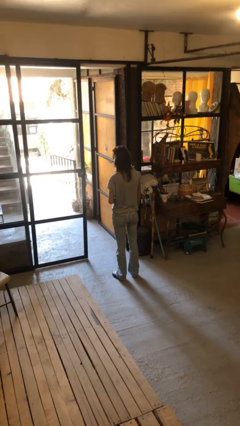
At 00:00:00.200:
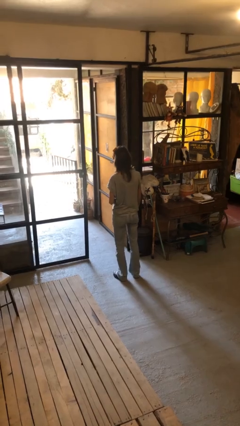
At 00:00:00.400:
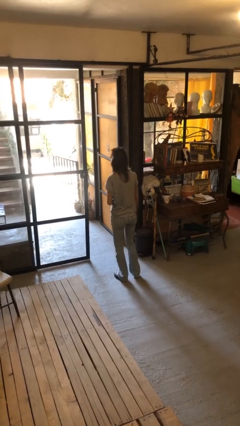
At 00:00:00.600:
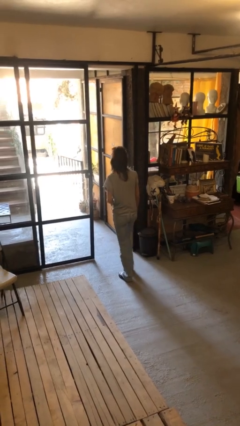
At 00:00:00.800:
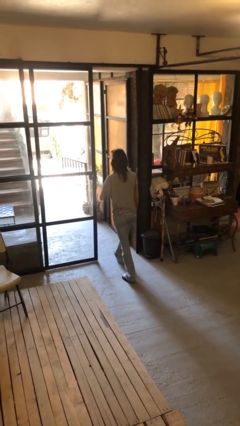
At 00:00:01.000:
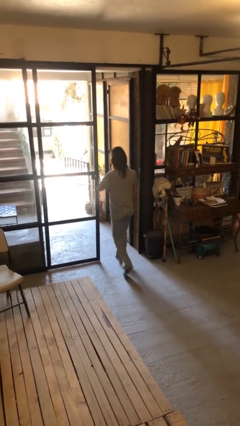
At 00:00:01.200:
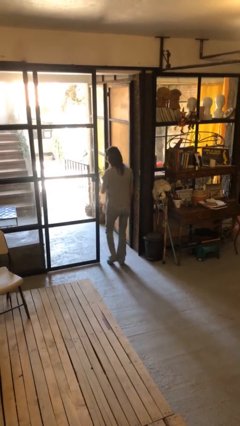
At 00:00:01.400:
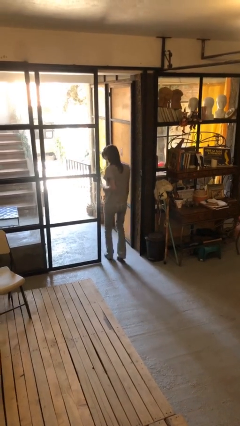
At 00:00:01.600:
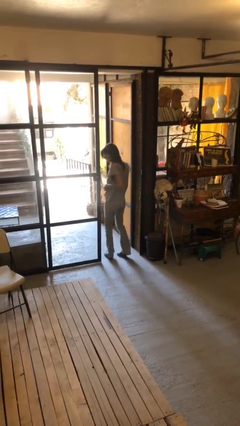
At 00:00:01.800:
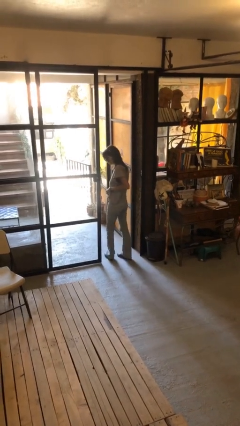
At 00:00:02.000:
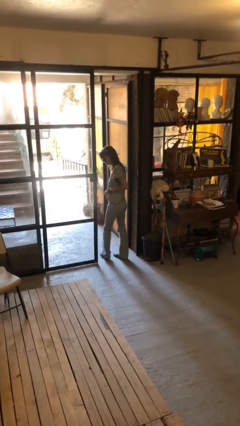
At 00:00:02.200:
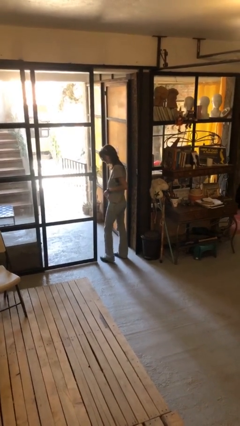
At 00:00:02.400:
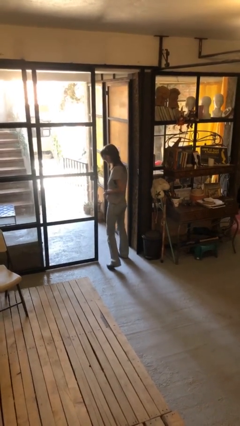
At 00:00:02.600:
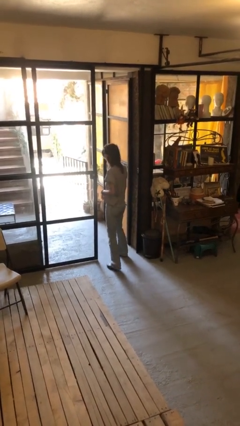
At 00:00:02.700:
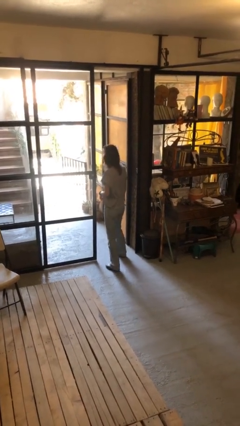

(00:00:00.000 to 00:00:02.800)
person bumps into wall

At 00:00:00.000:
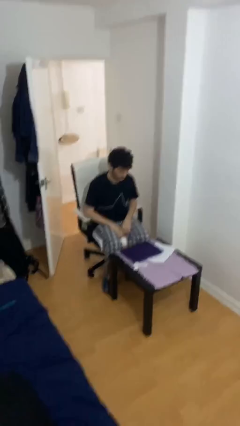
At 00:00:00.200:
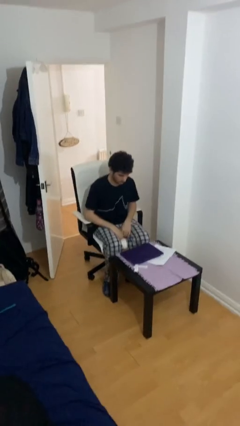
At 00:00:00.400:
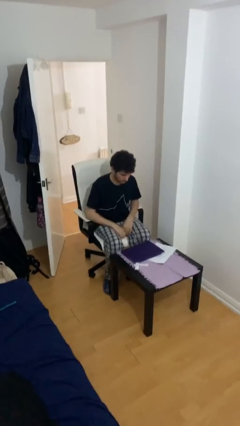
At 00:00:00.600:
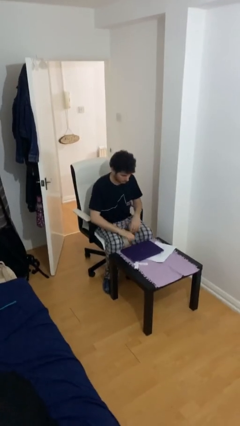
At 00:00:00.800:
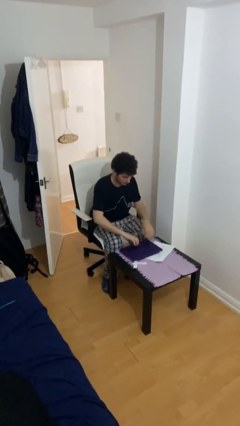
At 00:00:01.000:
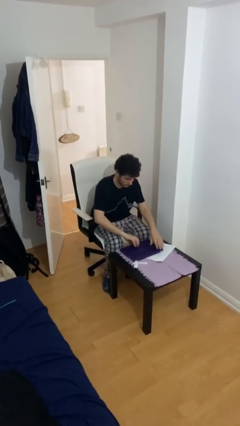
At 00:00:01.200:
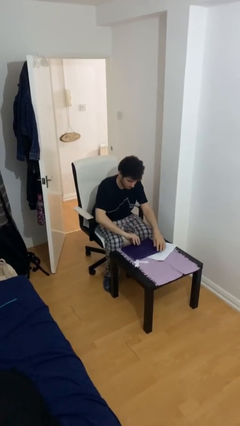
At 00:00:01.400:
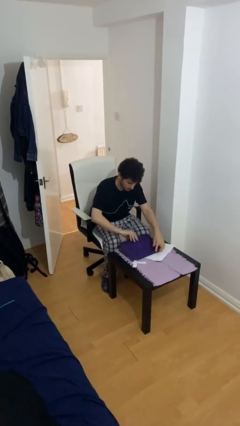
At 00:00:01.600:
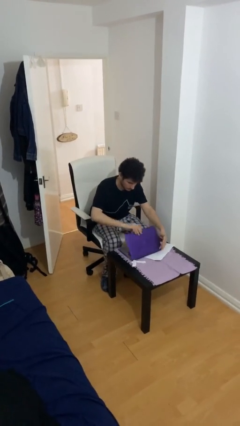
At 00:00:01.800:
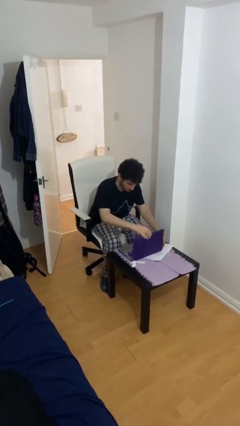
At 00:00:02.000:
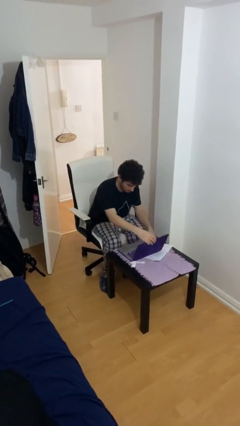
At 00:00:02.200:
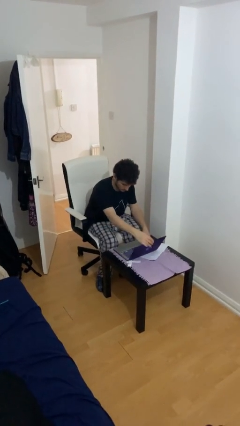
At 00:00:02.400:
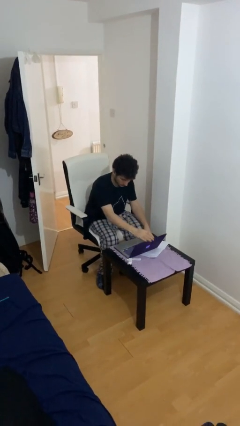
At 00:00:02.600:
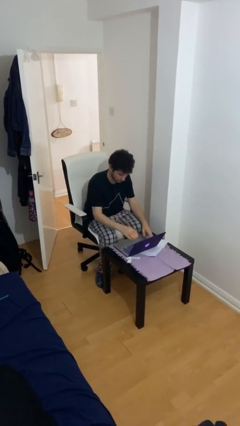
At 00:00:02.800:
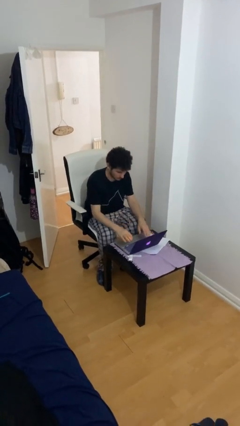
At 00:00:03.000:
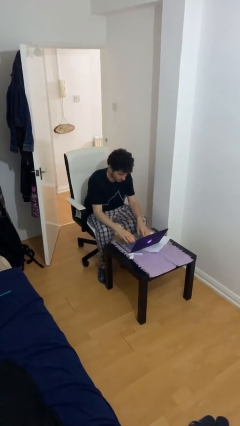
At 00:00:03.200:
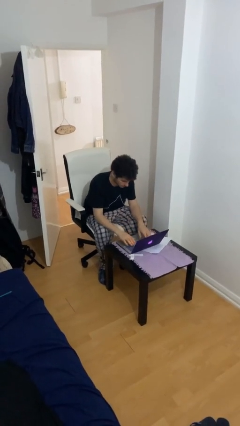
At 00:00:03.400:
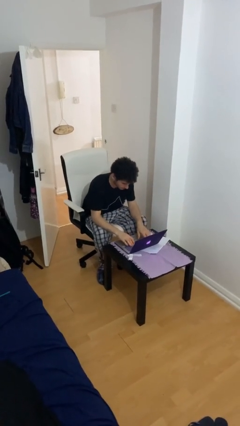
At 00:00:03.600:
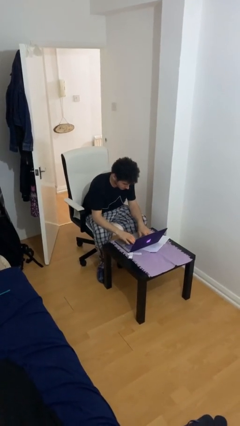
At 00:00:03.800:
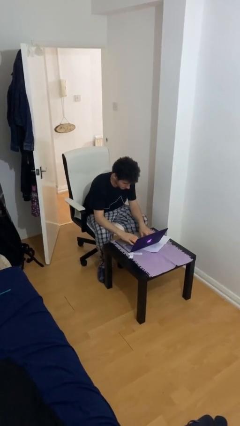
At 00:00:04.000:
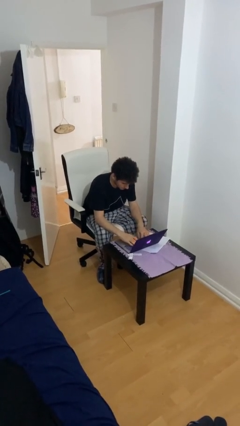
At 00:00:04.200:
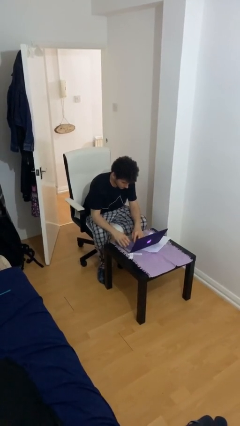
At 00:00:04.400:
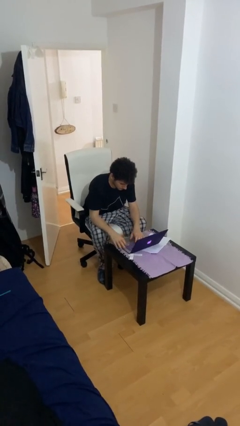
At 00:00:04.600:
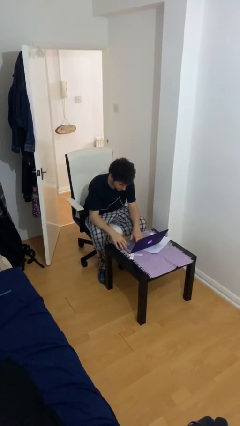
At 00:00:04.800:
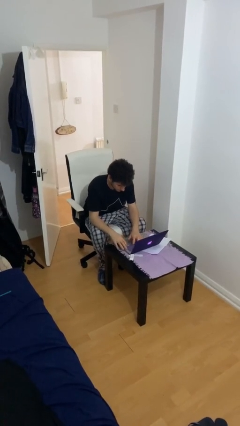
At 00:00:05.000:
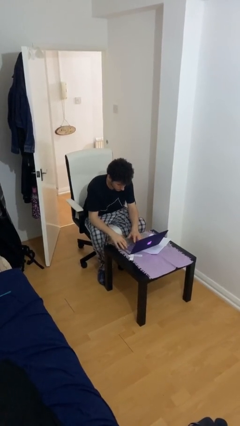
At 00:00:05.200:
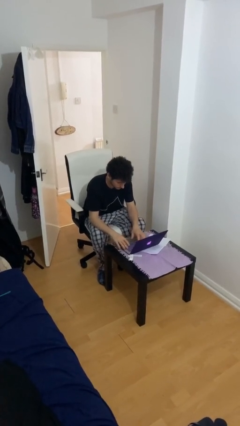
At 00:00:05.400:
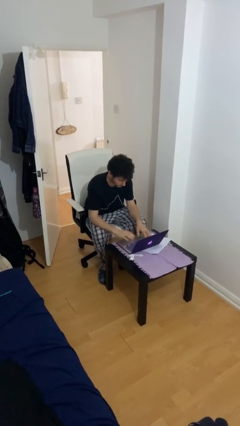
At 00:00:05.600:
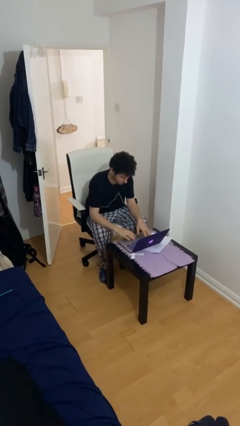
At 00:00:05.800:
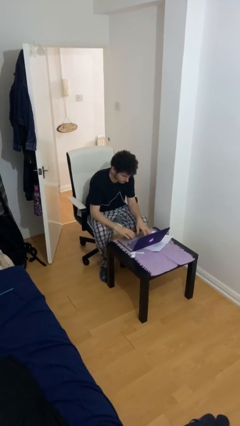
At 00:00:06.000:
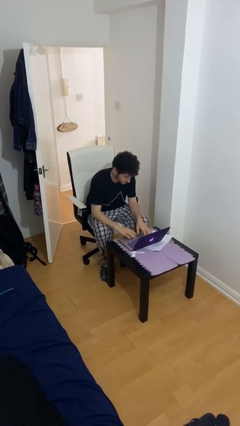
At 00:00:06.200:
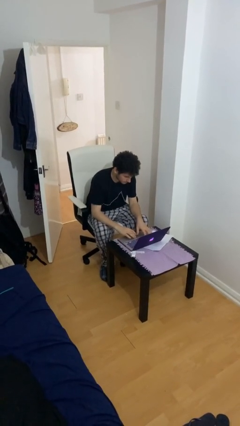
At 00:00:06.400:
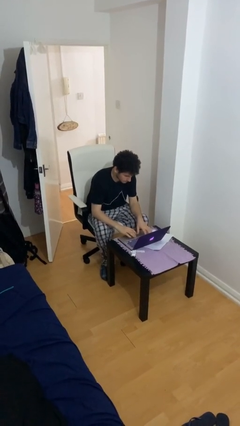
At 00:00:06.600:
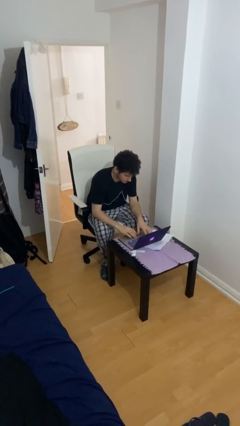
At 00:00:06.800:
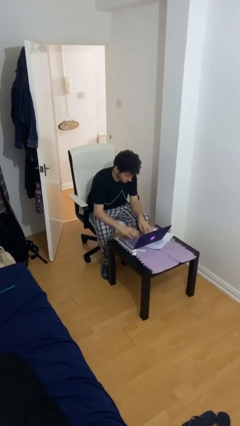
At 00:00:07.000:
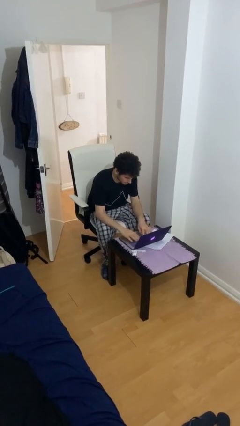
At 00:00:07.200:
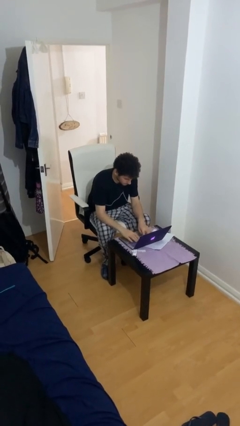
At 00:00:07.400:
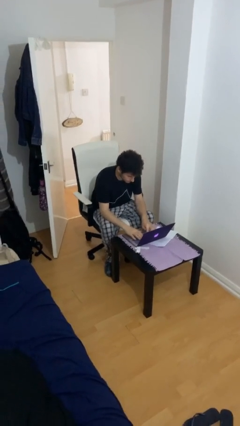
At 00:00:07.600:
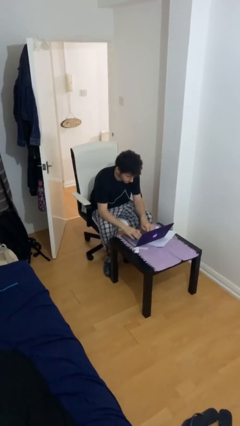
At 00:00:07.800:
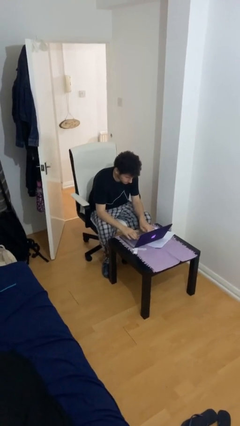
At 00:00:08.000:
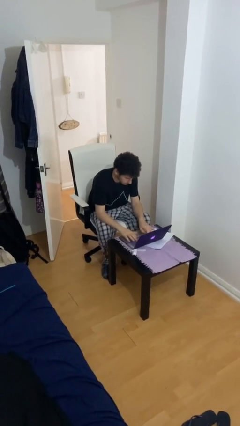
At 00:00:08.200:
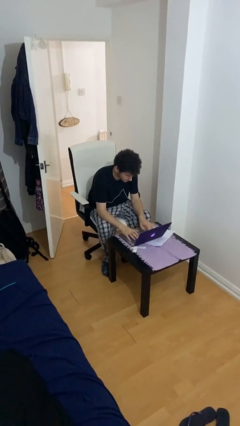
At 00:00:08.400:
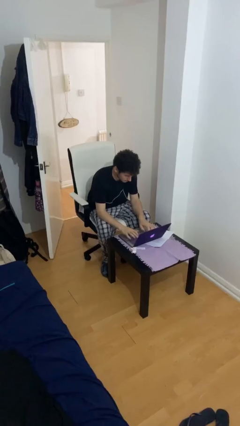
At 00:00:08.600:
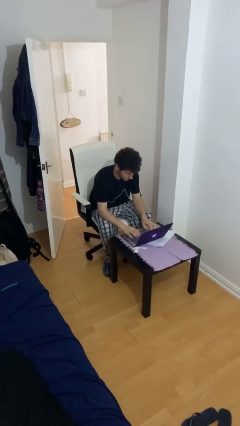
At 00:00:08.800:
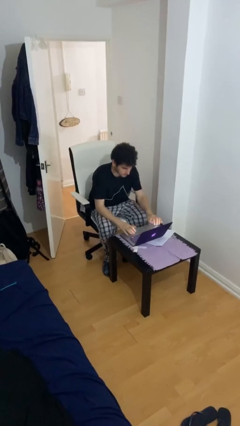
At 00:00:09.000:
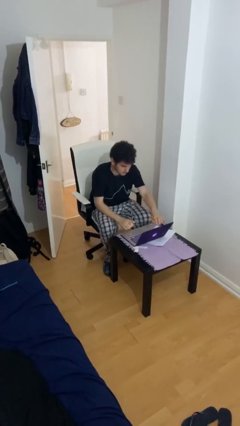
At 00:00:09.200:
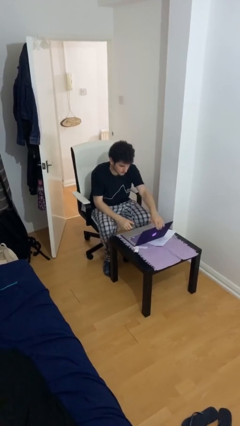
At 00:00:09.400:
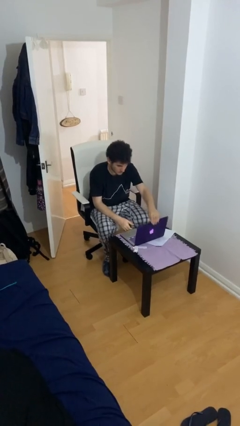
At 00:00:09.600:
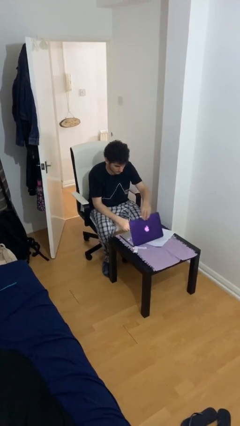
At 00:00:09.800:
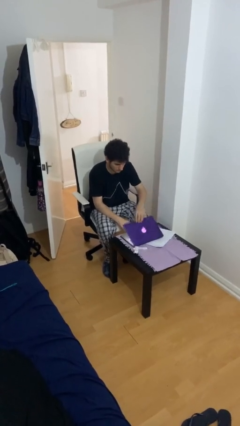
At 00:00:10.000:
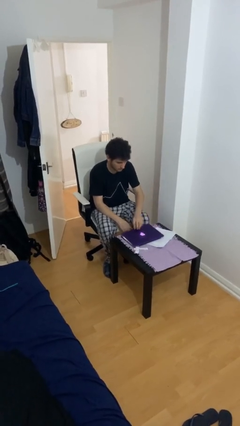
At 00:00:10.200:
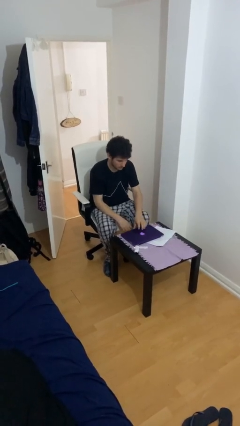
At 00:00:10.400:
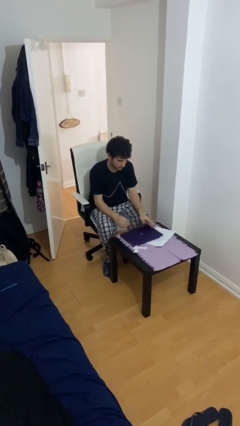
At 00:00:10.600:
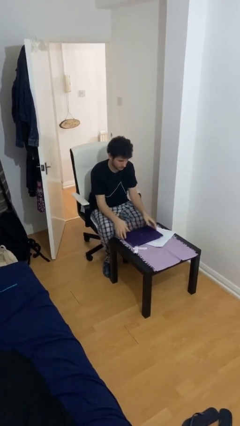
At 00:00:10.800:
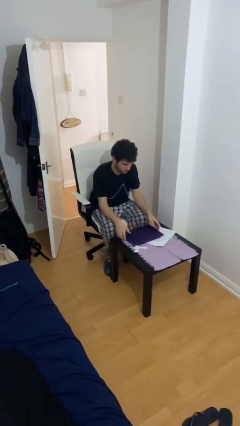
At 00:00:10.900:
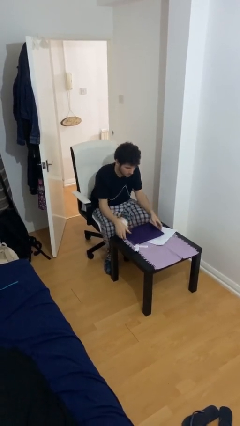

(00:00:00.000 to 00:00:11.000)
person interacts with laptop

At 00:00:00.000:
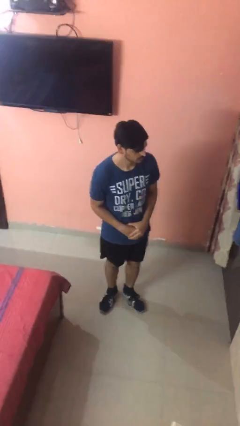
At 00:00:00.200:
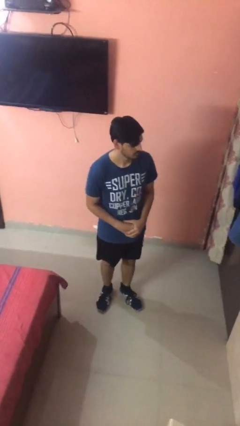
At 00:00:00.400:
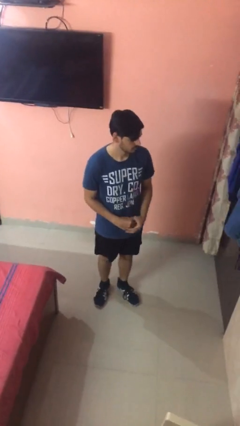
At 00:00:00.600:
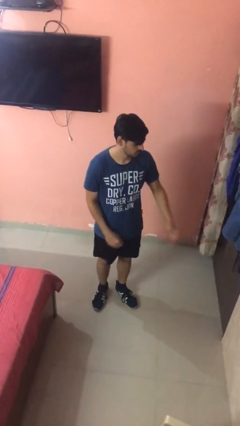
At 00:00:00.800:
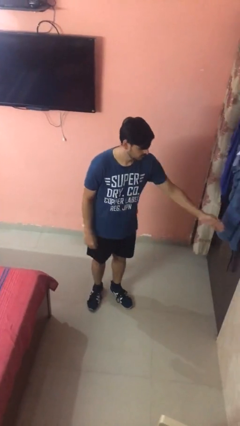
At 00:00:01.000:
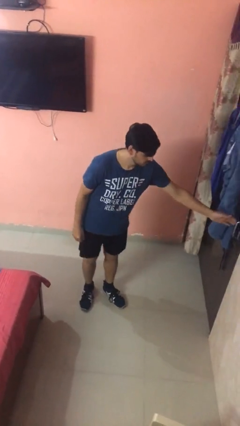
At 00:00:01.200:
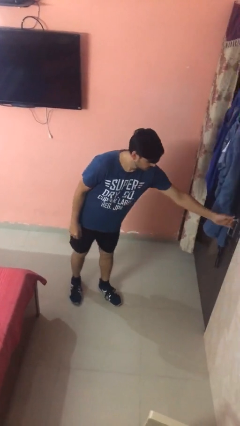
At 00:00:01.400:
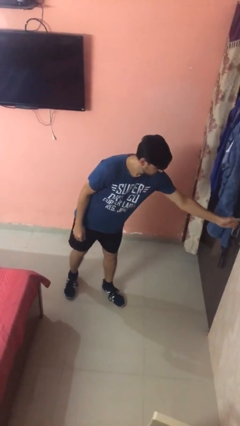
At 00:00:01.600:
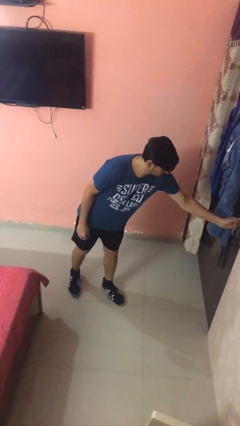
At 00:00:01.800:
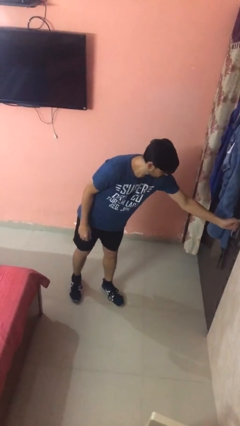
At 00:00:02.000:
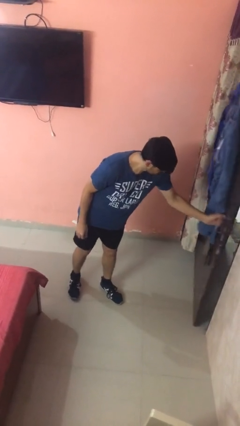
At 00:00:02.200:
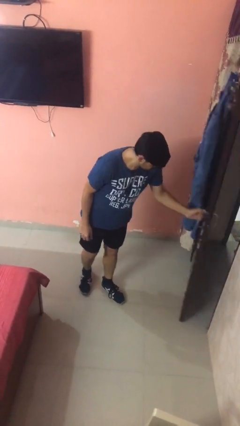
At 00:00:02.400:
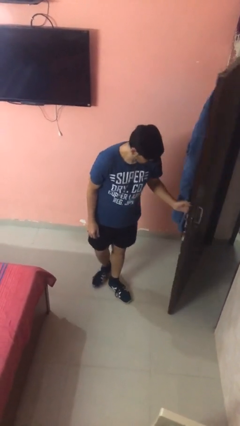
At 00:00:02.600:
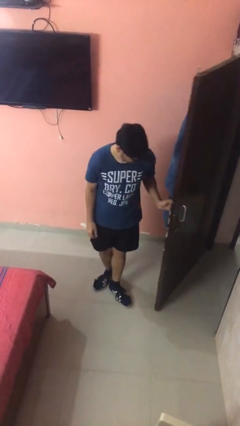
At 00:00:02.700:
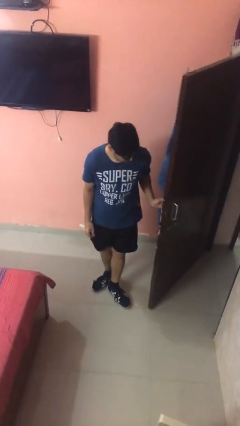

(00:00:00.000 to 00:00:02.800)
person opens facility door

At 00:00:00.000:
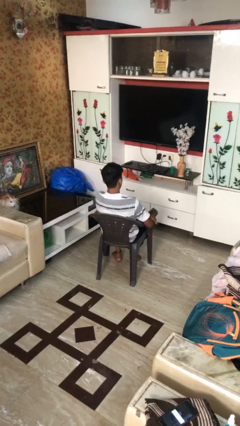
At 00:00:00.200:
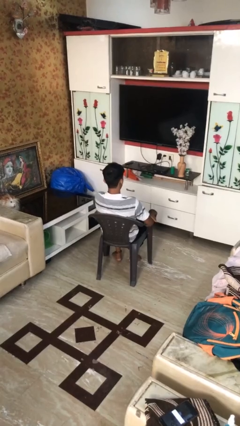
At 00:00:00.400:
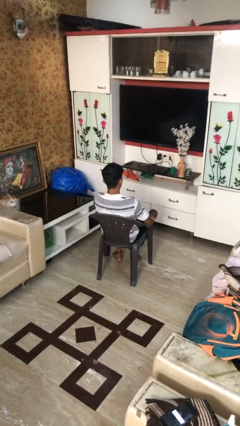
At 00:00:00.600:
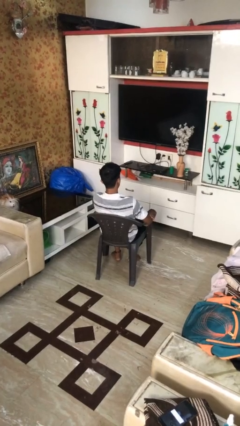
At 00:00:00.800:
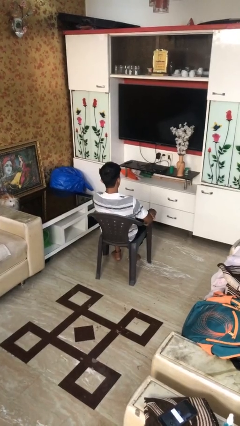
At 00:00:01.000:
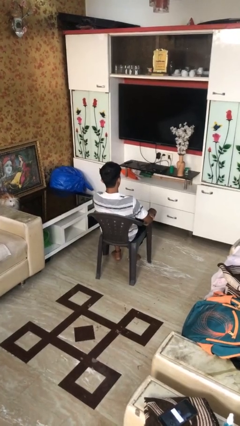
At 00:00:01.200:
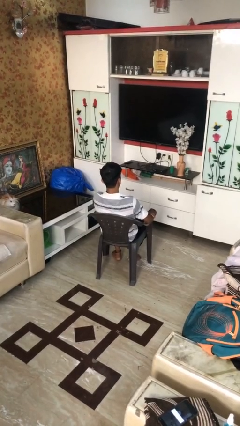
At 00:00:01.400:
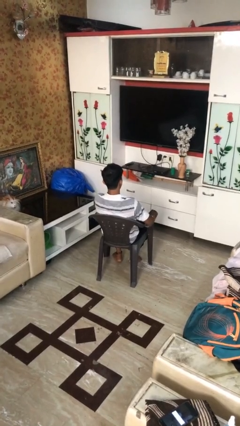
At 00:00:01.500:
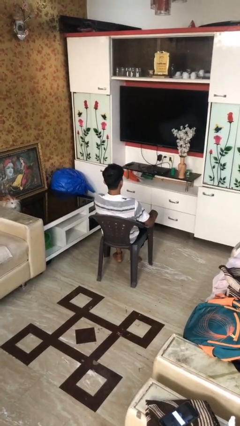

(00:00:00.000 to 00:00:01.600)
person swats bug
